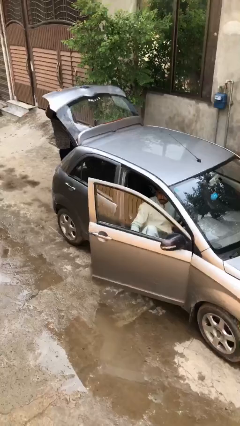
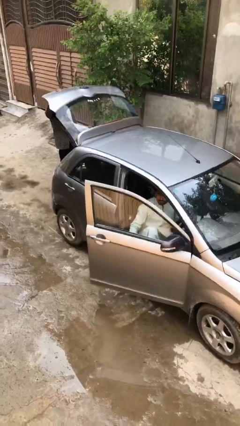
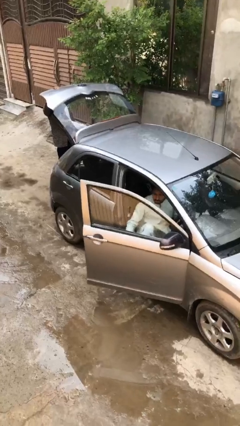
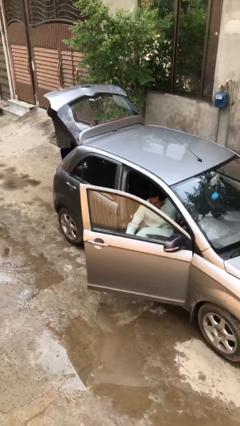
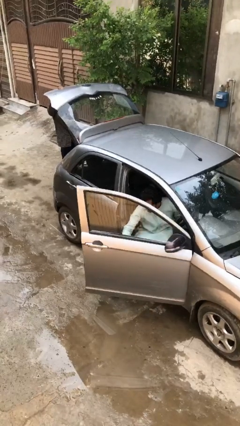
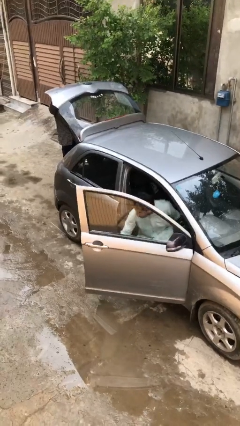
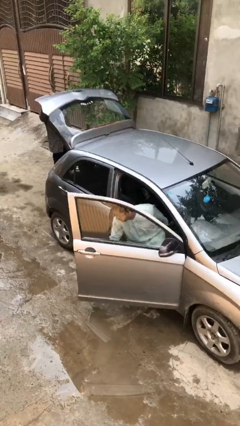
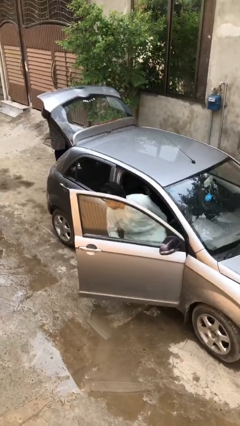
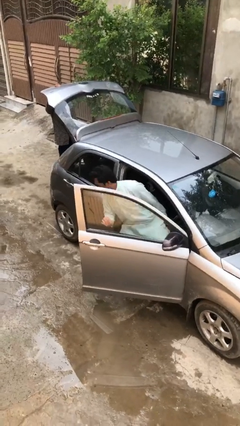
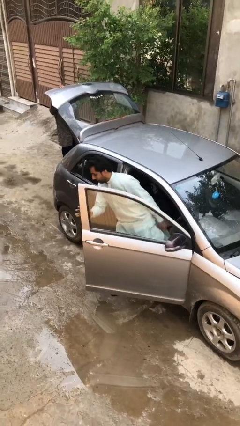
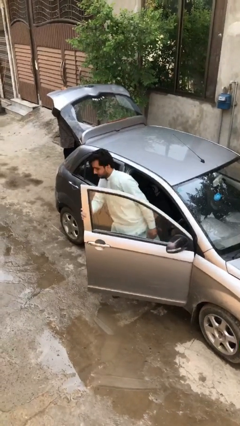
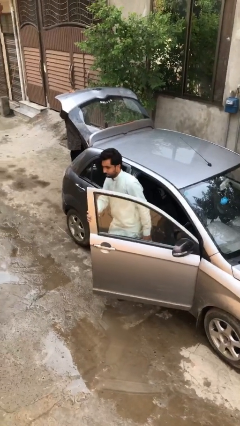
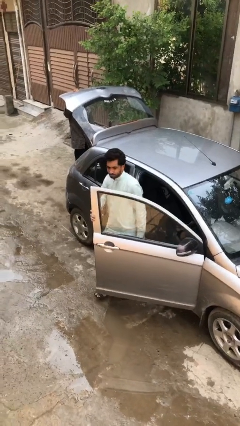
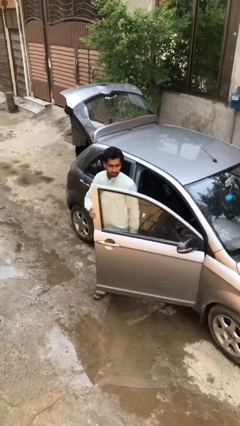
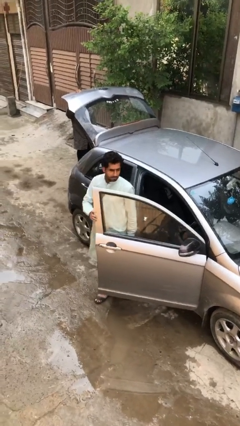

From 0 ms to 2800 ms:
person exits car

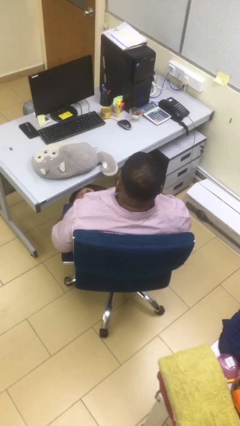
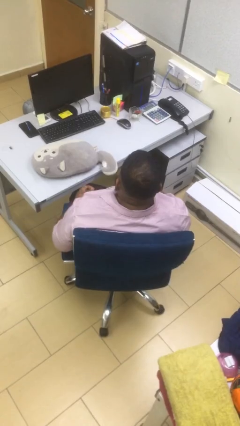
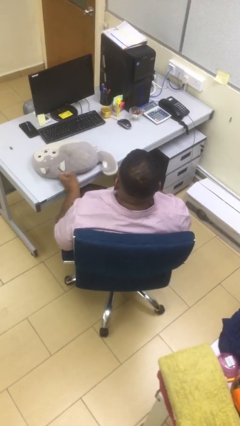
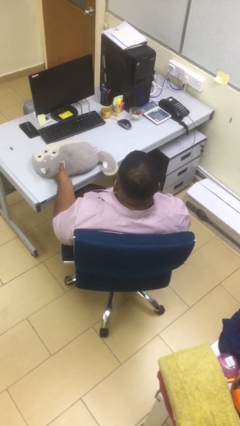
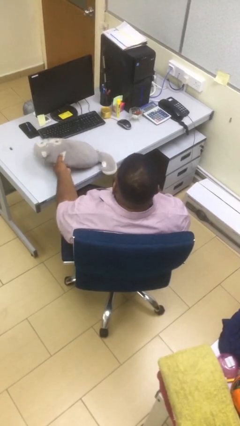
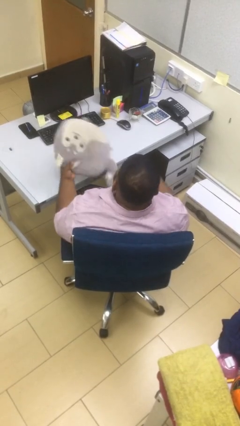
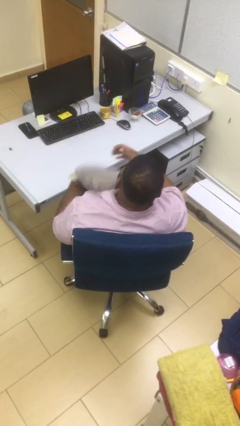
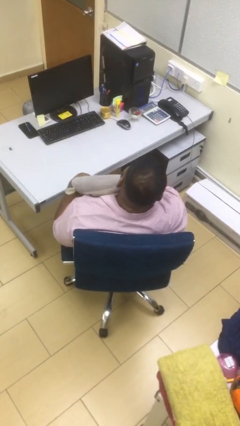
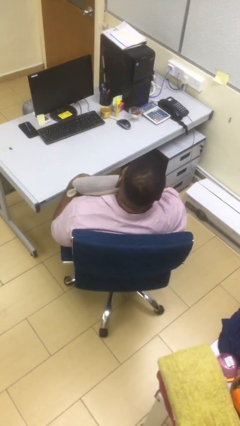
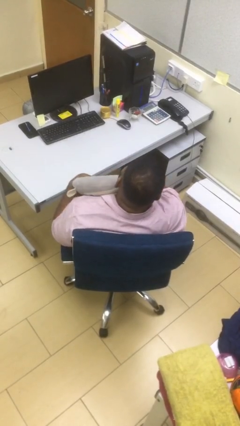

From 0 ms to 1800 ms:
person hugs stuffed animal

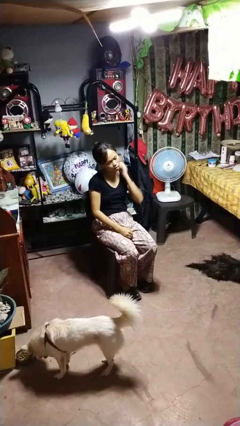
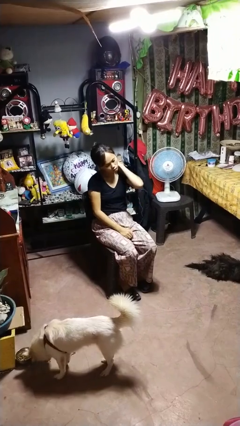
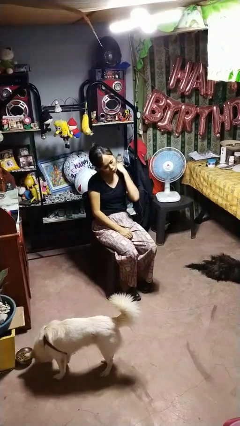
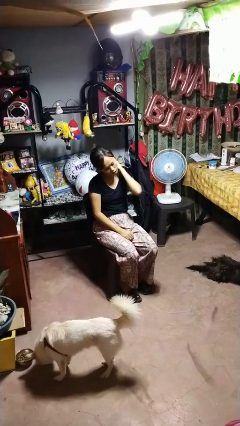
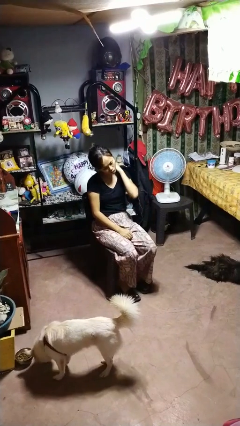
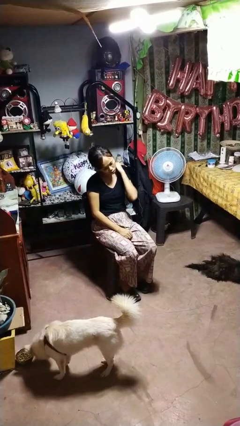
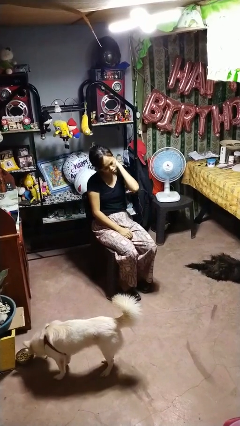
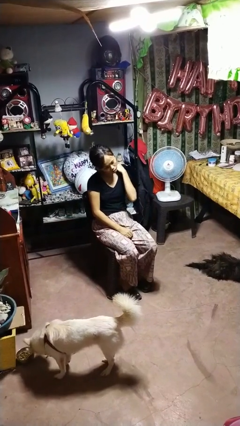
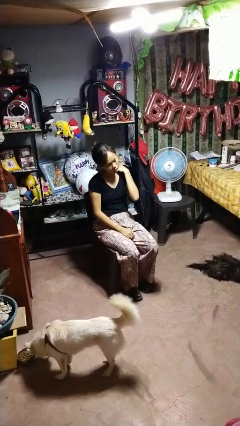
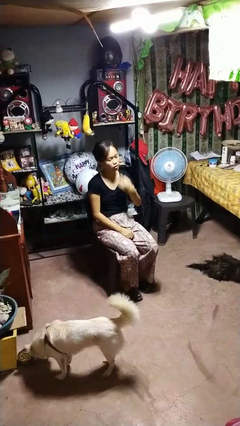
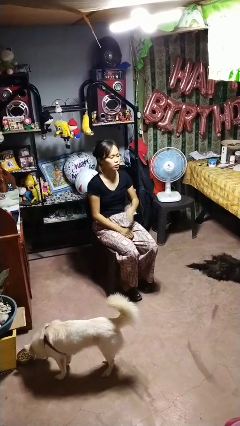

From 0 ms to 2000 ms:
person rubs neck

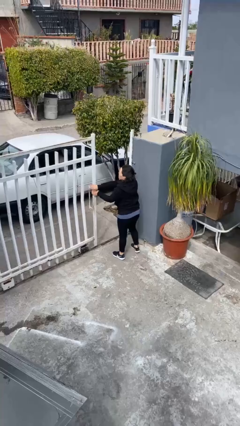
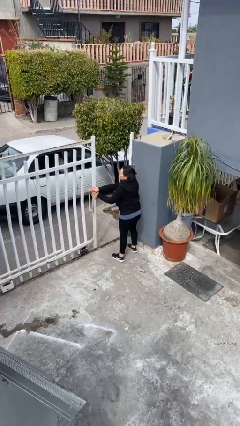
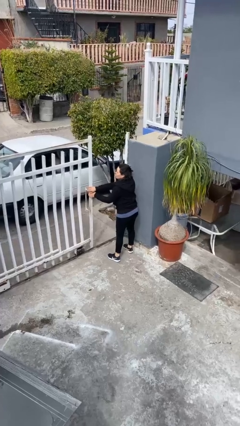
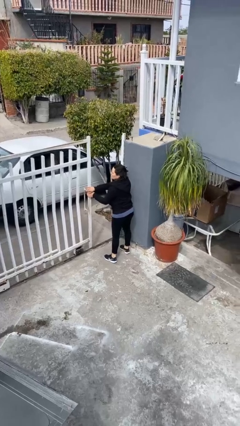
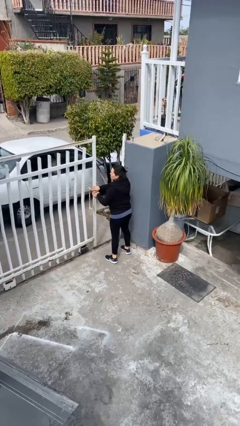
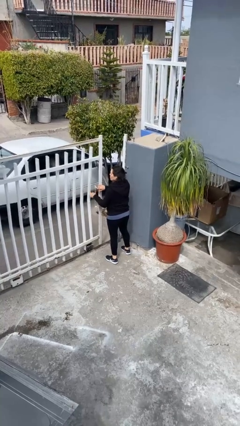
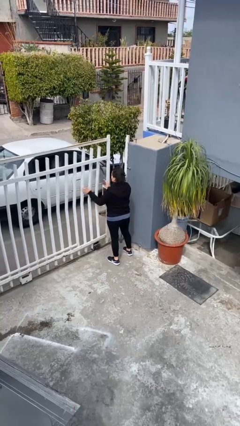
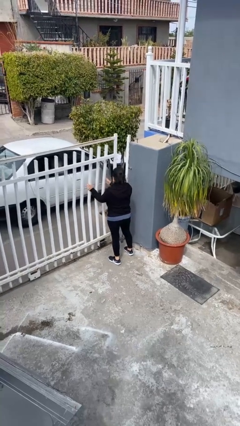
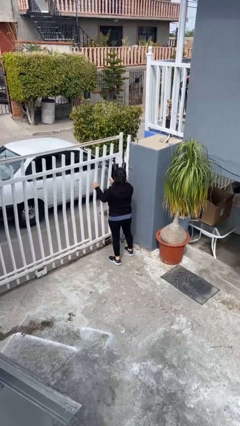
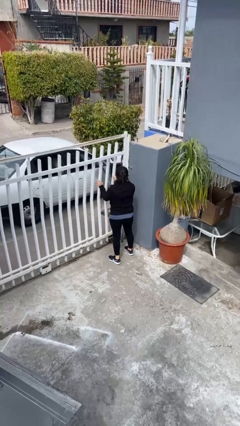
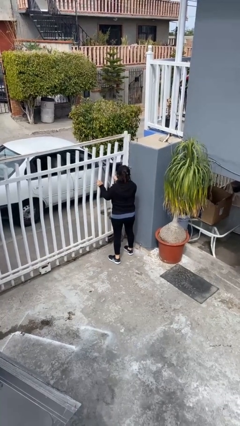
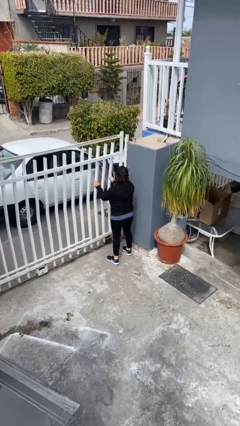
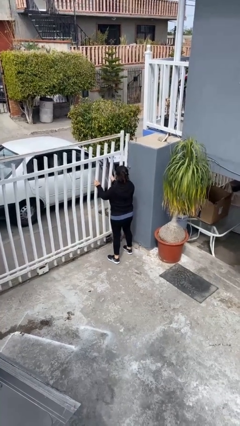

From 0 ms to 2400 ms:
person closes facility door

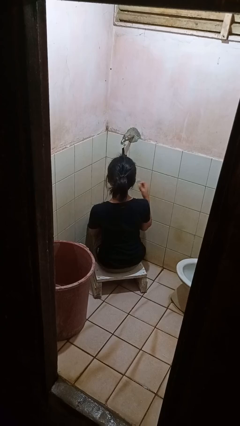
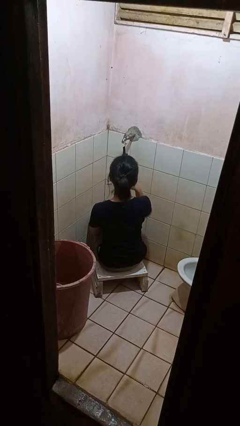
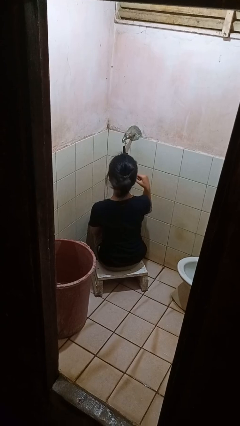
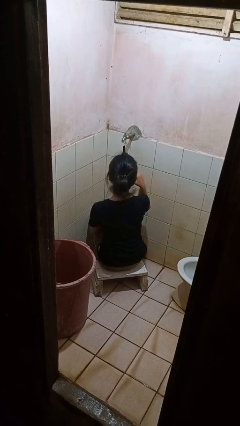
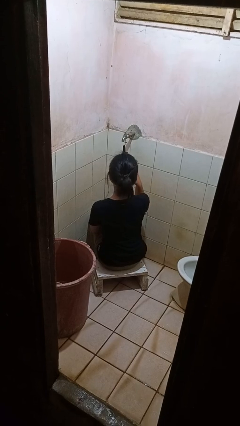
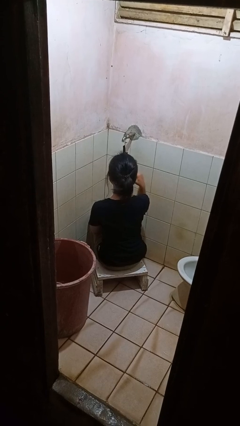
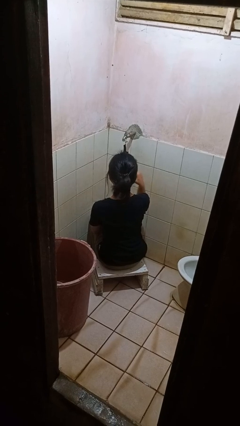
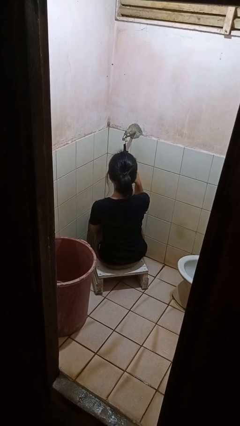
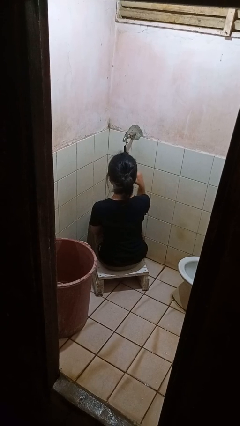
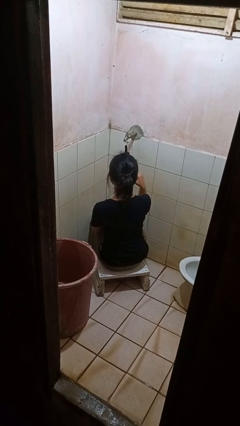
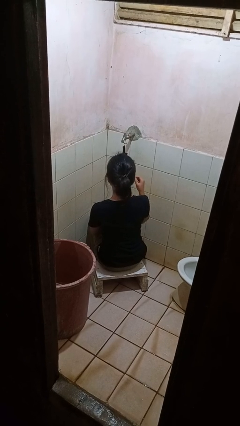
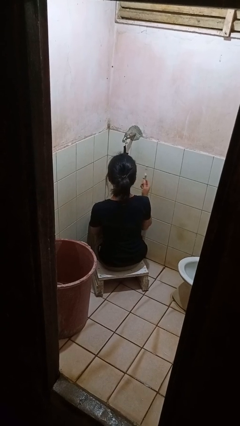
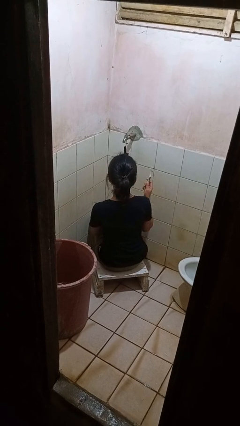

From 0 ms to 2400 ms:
person brushes teeth

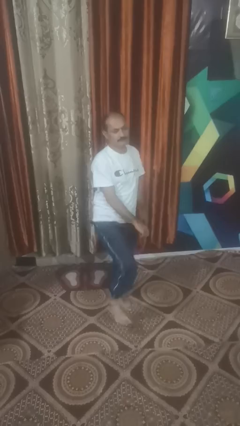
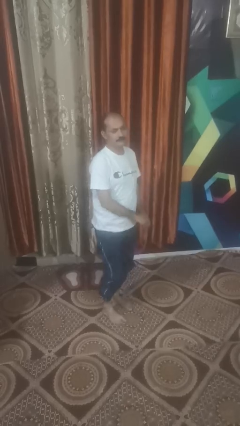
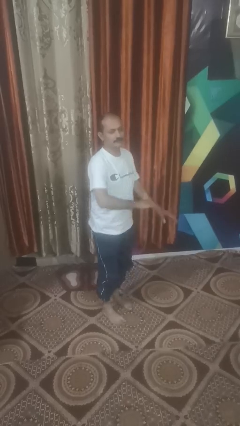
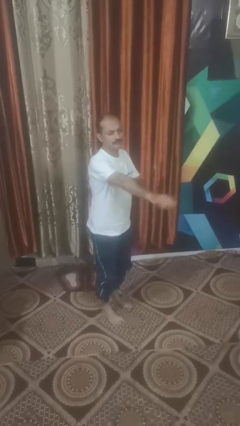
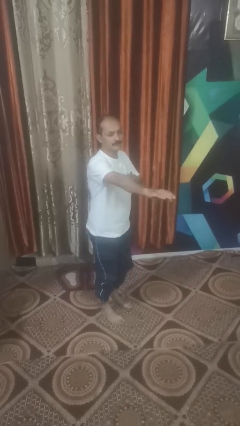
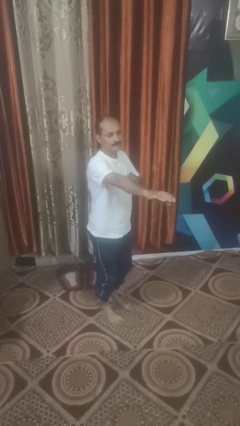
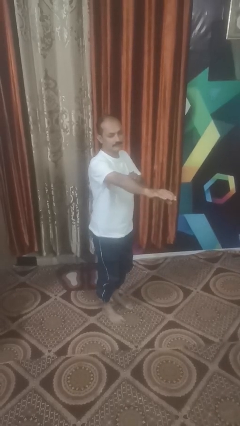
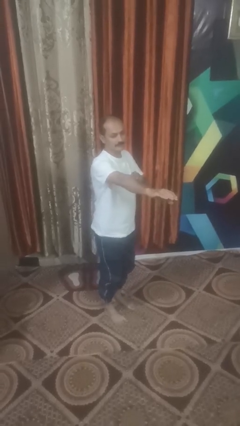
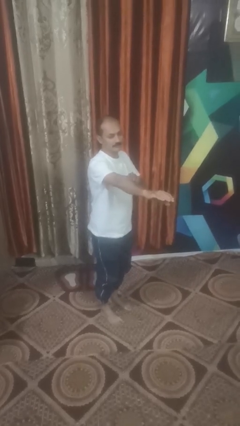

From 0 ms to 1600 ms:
person karate chop

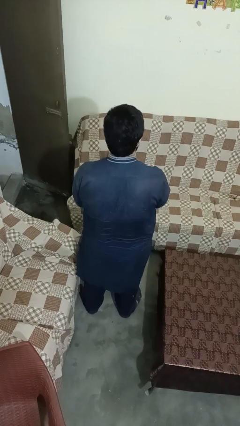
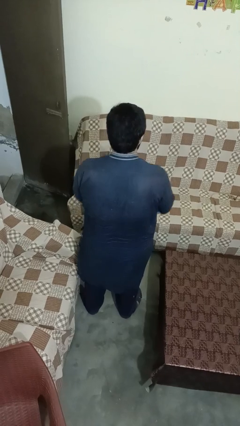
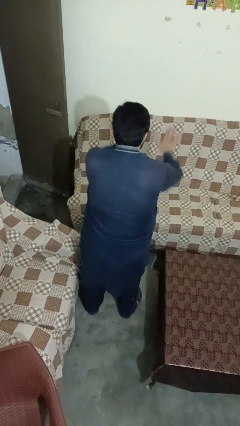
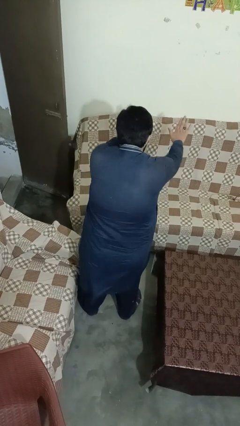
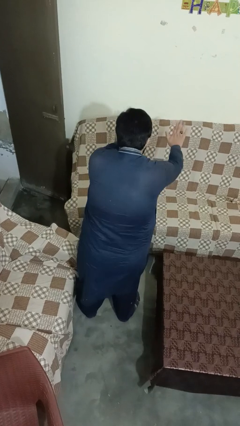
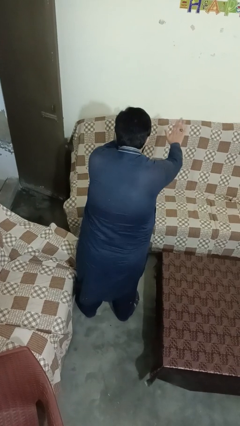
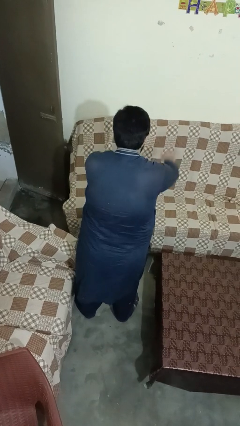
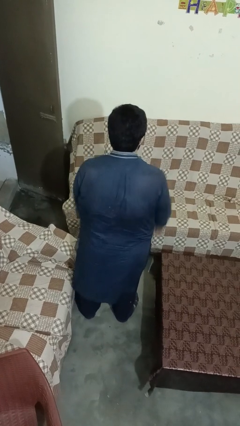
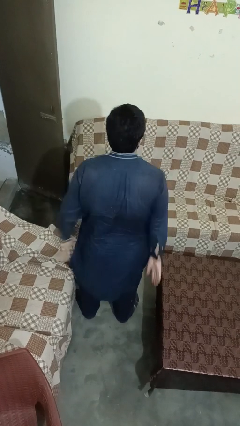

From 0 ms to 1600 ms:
person gestures stop

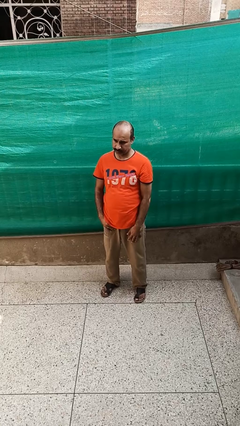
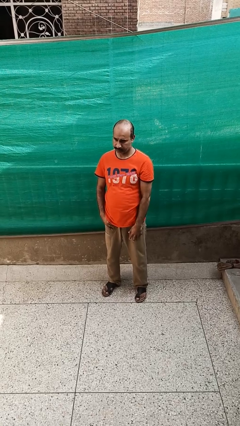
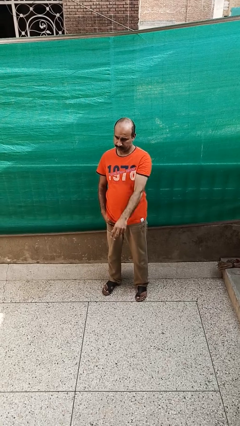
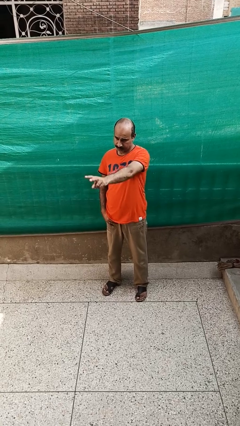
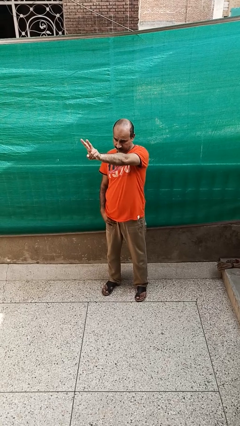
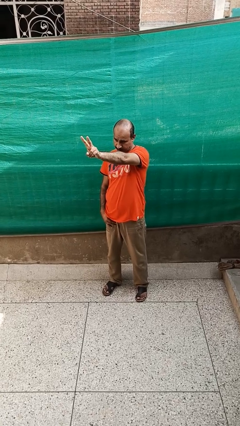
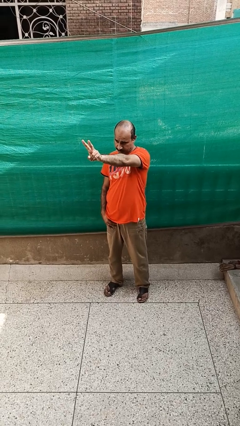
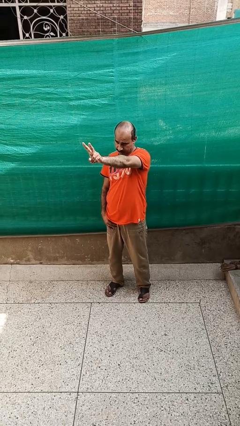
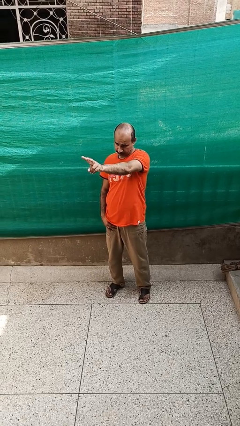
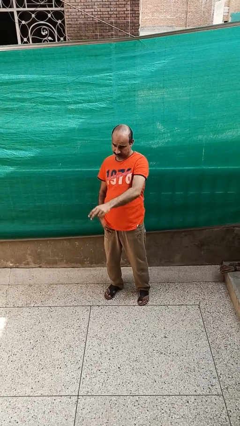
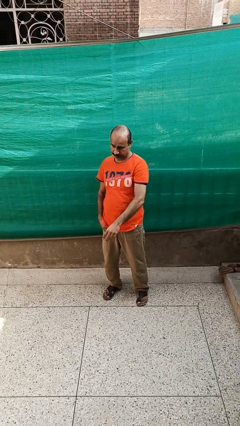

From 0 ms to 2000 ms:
person gestures peace

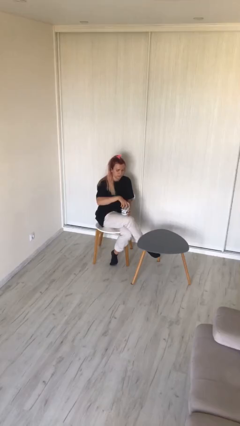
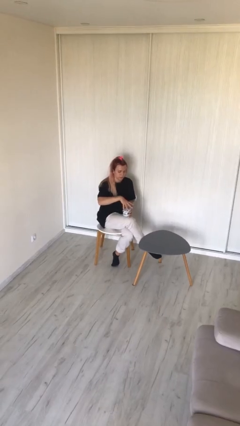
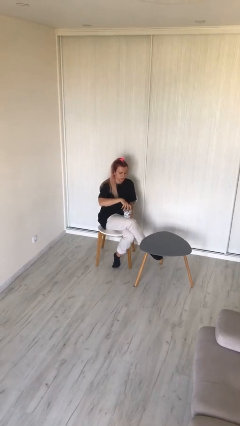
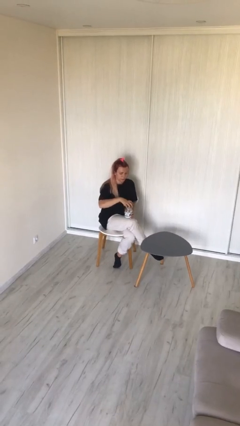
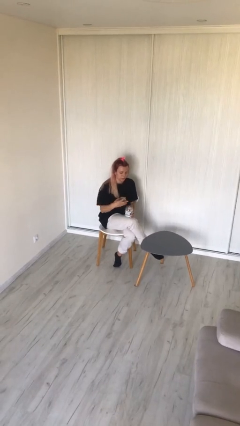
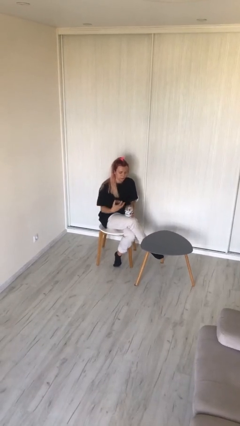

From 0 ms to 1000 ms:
person opens jar
